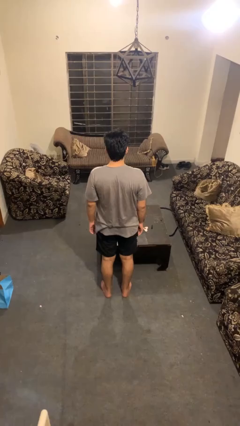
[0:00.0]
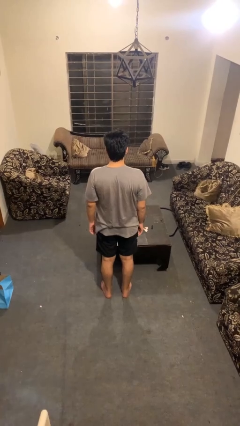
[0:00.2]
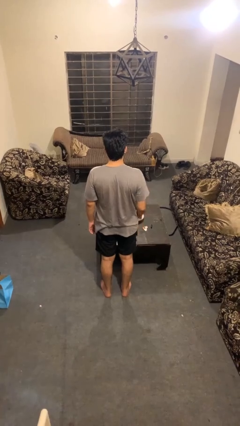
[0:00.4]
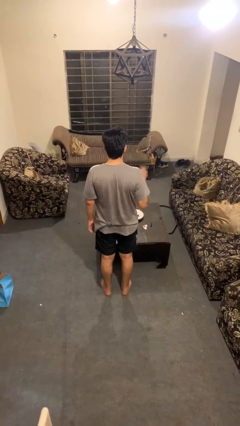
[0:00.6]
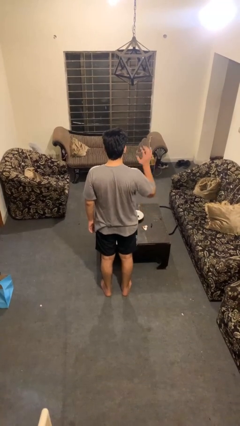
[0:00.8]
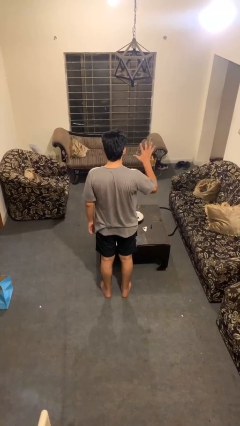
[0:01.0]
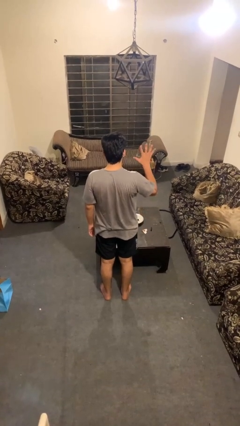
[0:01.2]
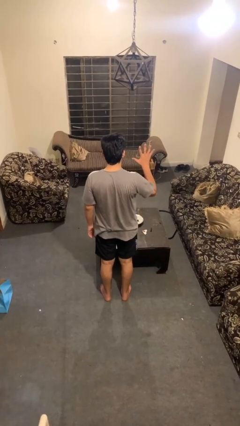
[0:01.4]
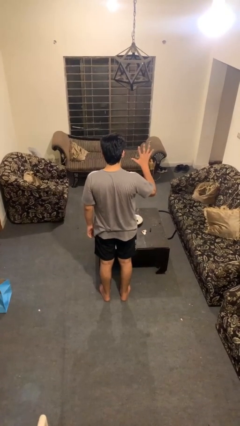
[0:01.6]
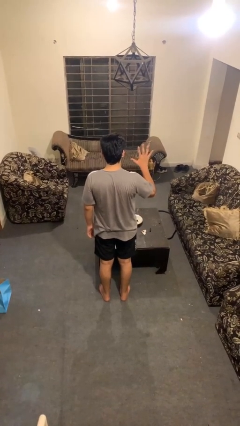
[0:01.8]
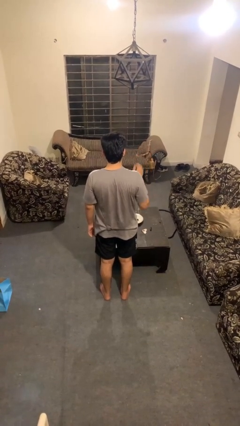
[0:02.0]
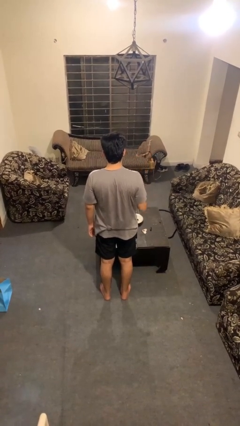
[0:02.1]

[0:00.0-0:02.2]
person gestures number five

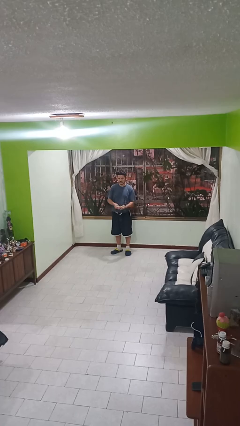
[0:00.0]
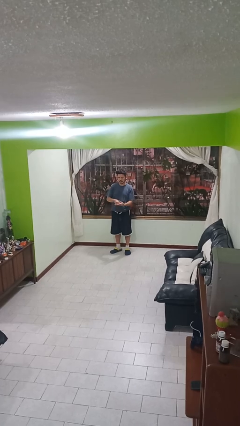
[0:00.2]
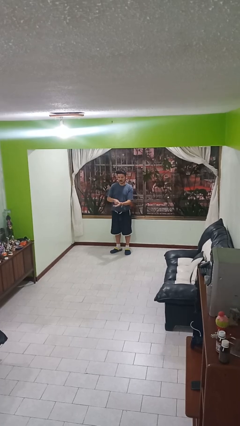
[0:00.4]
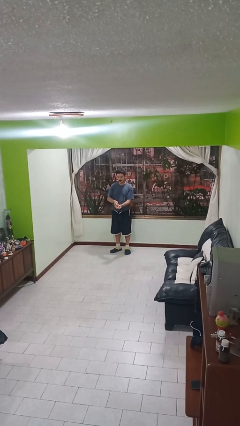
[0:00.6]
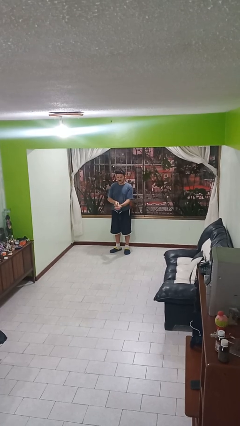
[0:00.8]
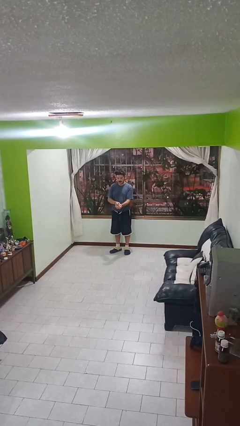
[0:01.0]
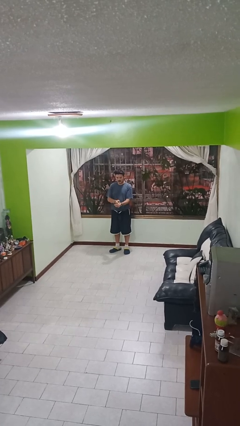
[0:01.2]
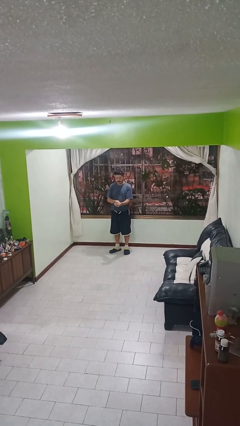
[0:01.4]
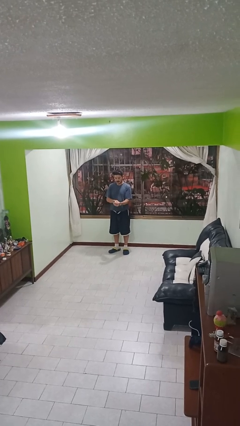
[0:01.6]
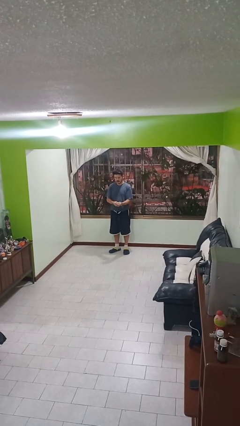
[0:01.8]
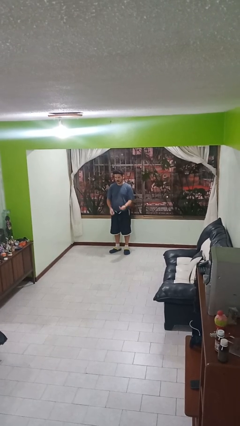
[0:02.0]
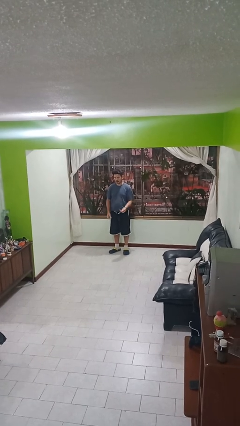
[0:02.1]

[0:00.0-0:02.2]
person puts on wristwatch

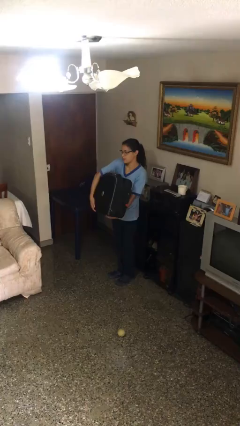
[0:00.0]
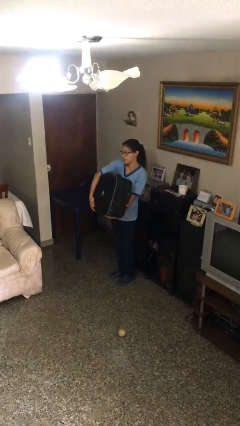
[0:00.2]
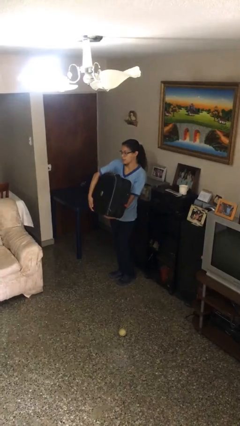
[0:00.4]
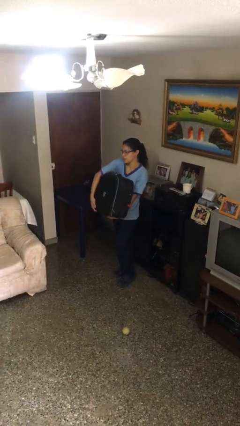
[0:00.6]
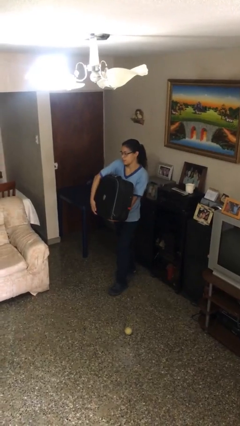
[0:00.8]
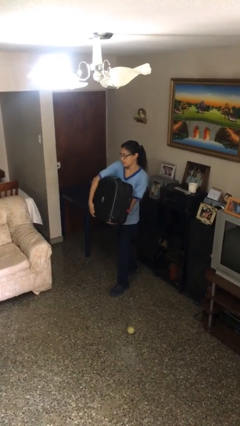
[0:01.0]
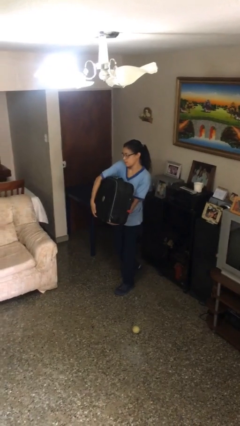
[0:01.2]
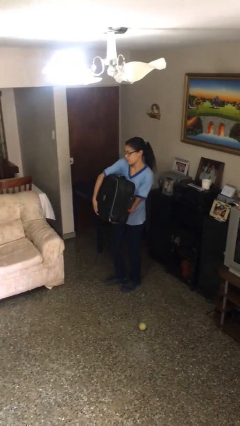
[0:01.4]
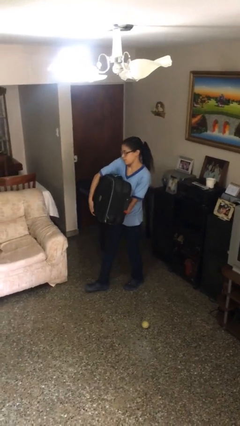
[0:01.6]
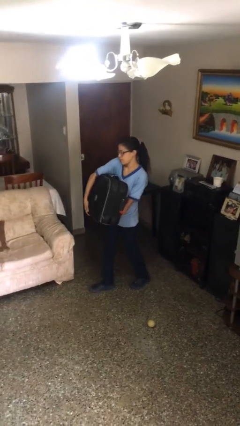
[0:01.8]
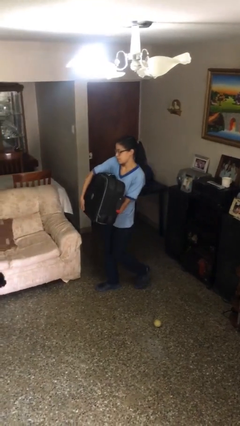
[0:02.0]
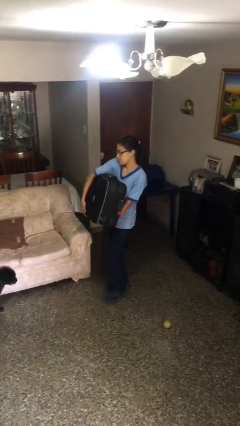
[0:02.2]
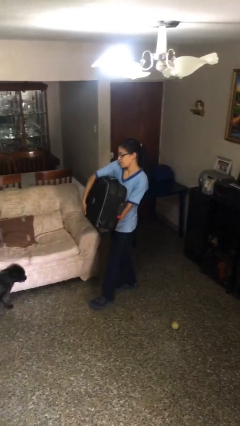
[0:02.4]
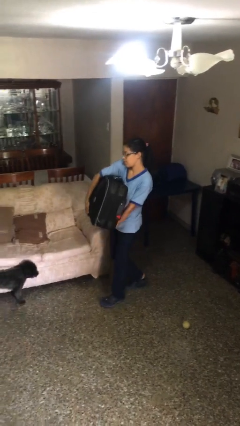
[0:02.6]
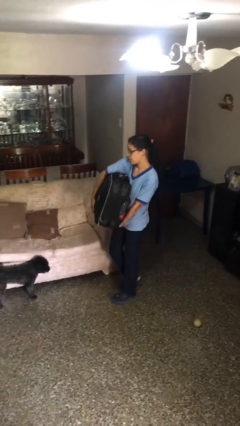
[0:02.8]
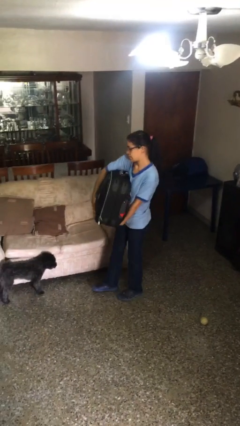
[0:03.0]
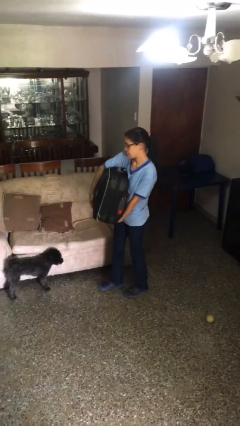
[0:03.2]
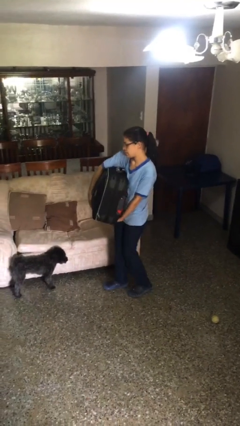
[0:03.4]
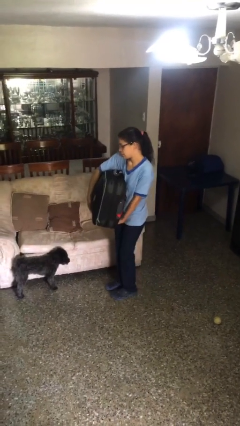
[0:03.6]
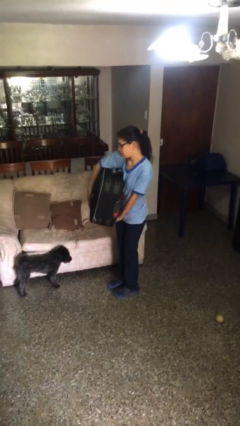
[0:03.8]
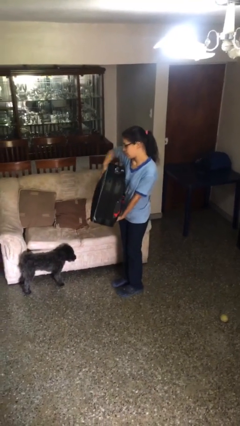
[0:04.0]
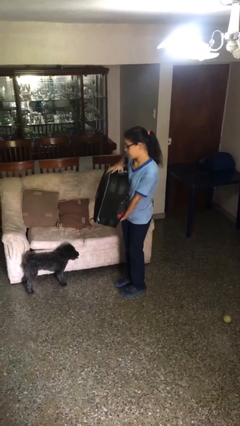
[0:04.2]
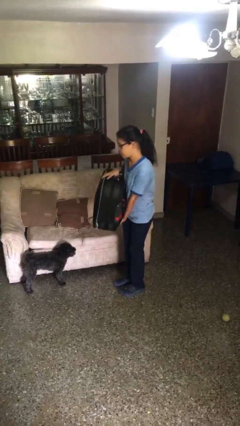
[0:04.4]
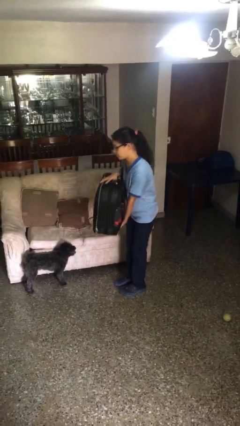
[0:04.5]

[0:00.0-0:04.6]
person carries heavy object

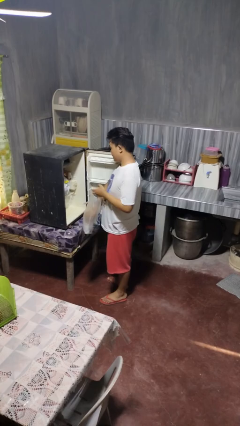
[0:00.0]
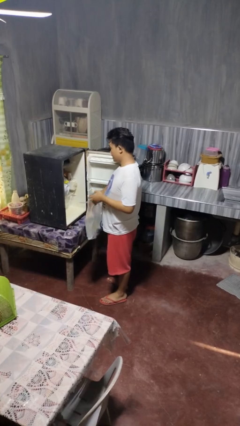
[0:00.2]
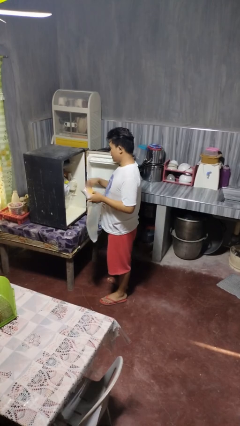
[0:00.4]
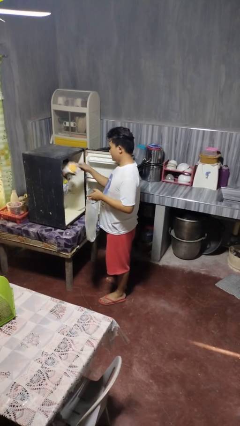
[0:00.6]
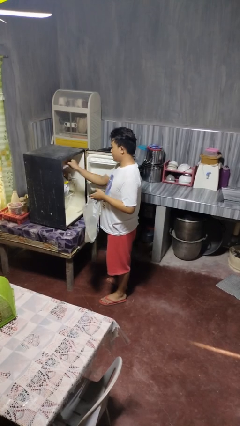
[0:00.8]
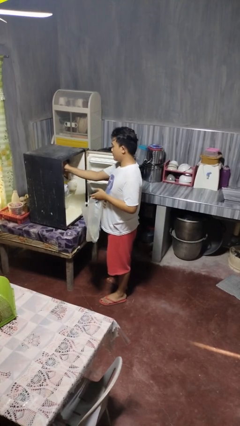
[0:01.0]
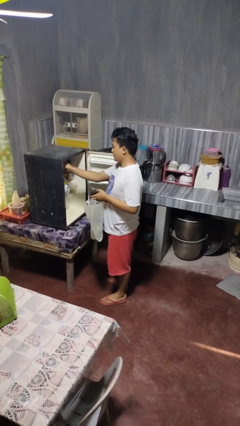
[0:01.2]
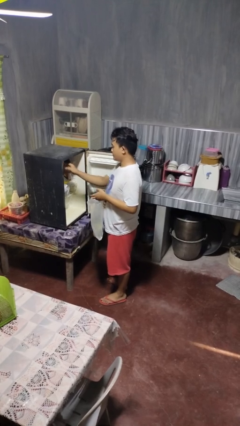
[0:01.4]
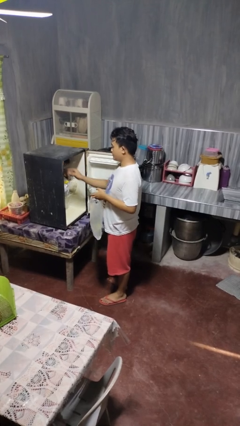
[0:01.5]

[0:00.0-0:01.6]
person loads groceries into refrigerator

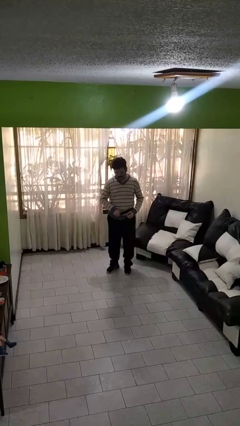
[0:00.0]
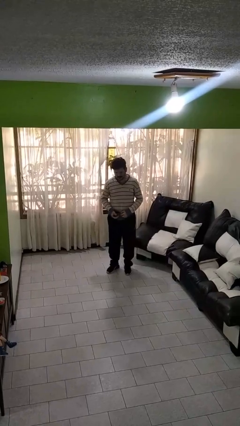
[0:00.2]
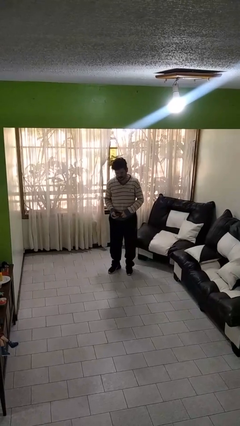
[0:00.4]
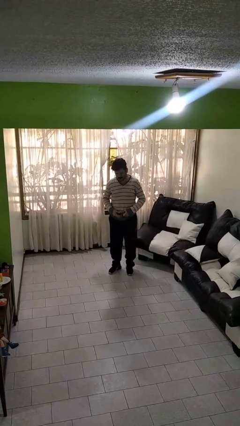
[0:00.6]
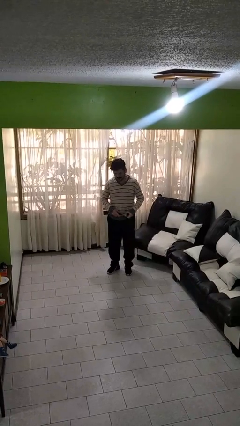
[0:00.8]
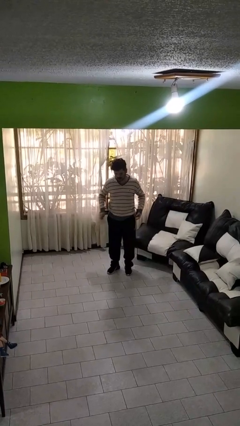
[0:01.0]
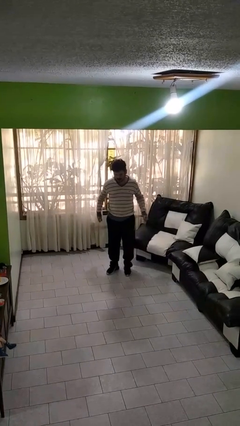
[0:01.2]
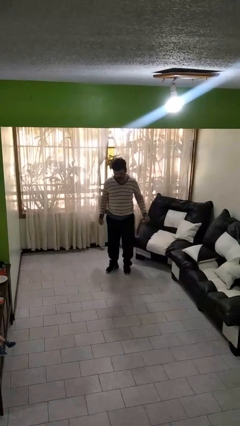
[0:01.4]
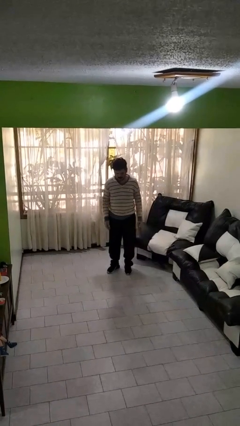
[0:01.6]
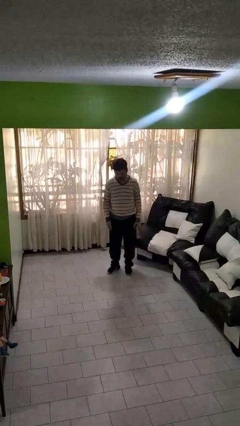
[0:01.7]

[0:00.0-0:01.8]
person takes off belt

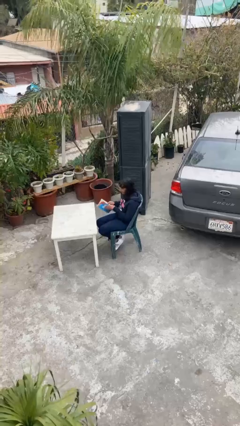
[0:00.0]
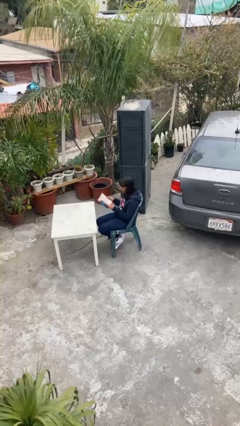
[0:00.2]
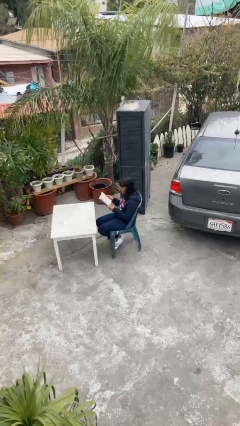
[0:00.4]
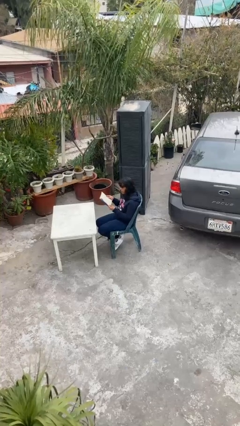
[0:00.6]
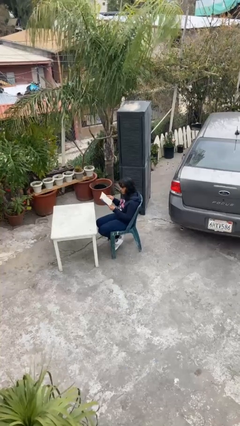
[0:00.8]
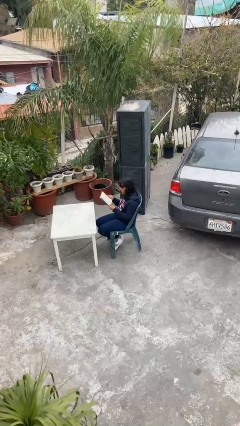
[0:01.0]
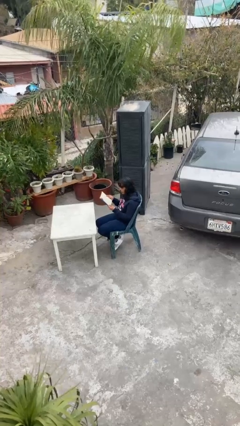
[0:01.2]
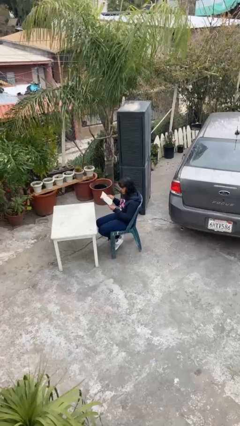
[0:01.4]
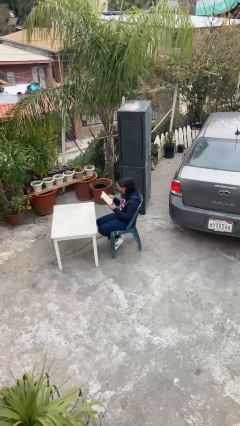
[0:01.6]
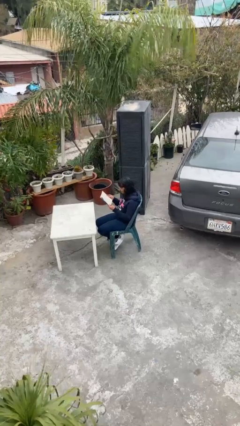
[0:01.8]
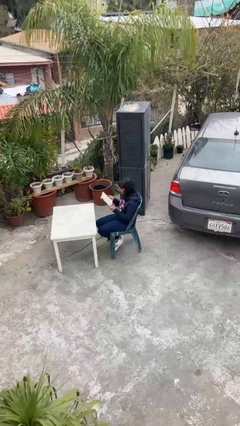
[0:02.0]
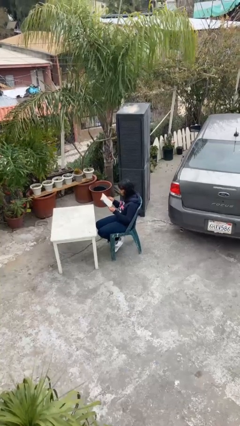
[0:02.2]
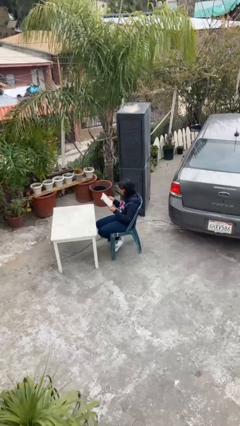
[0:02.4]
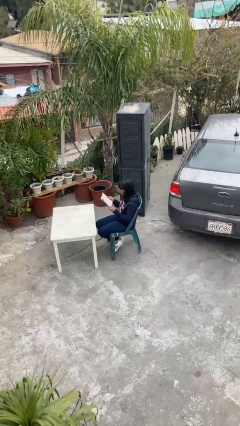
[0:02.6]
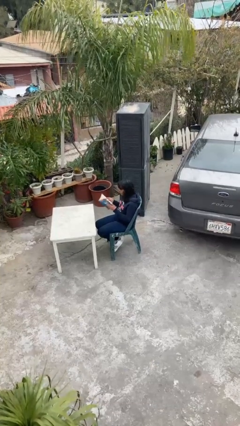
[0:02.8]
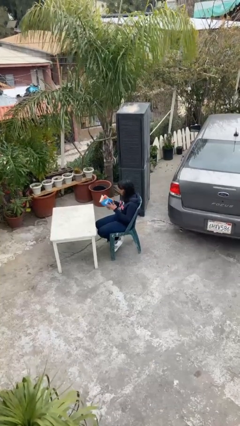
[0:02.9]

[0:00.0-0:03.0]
person reads document

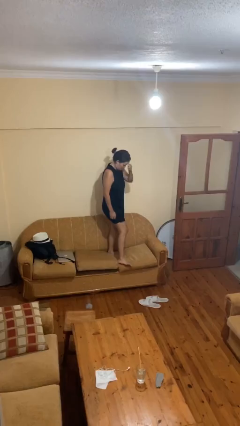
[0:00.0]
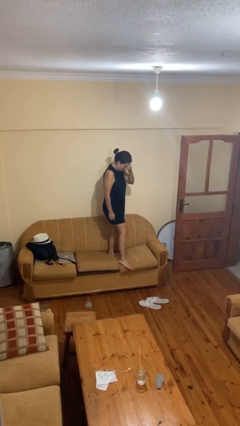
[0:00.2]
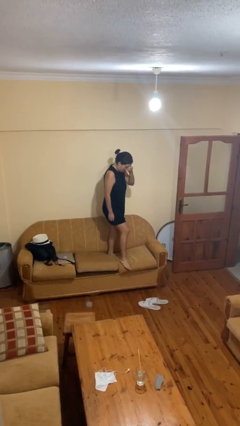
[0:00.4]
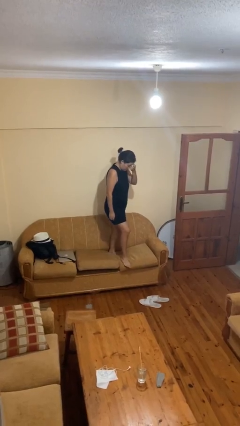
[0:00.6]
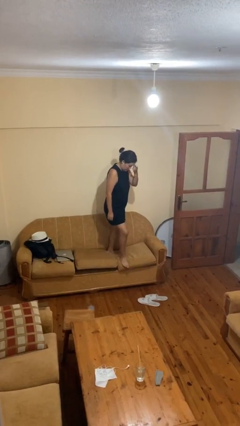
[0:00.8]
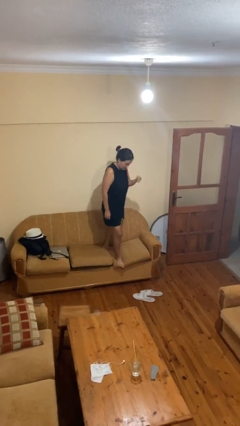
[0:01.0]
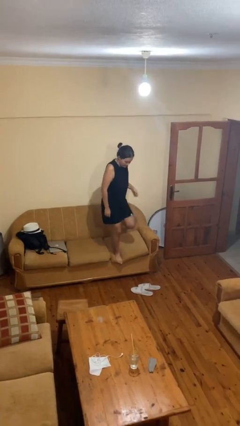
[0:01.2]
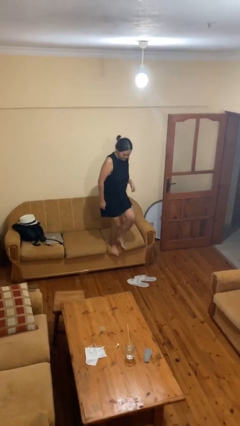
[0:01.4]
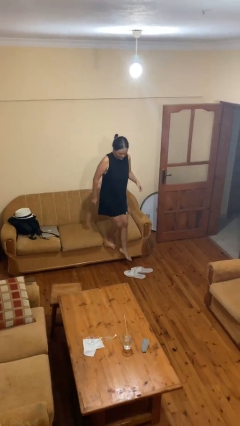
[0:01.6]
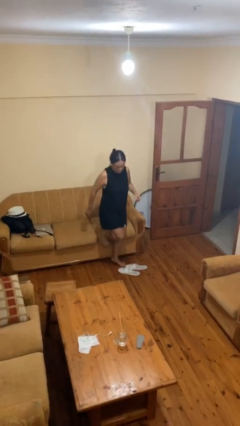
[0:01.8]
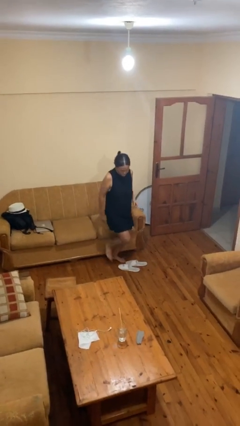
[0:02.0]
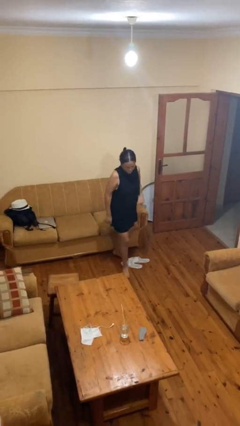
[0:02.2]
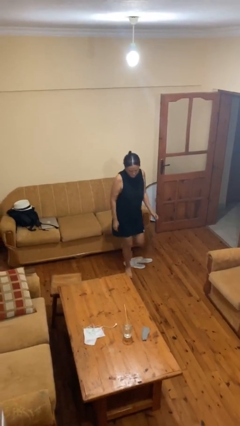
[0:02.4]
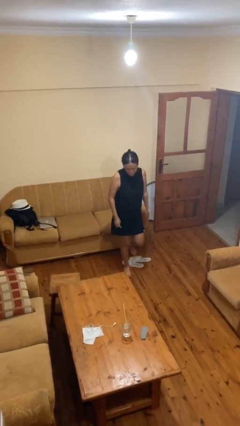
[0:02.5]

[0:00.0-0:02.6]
person climbs off couch
